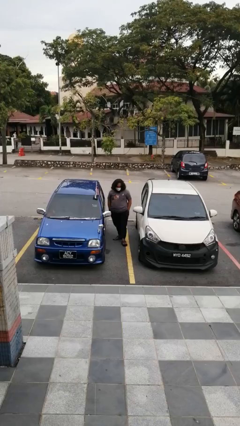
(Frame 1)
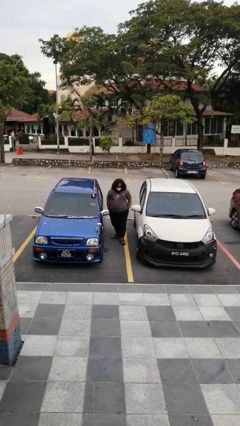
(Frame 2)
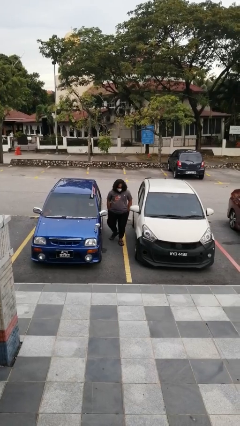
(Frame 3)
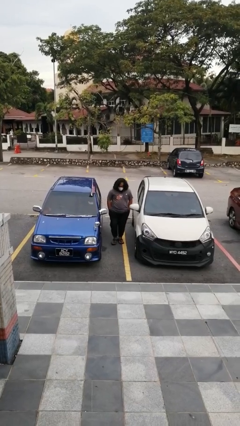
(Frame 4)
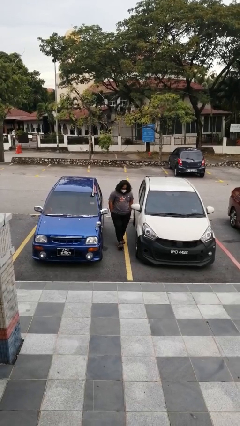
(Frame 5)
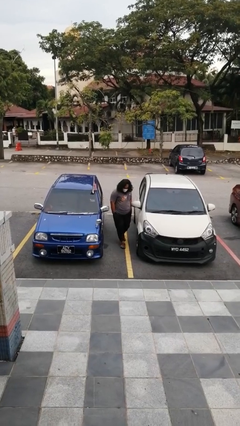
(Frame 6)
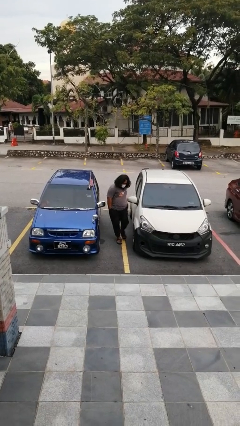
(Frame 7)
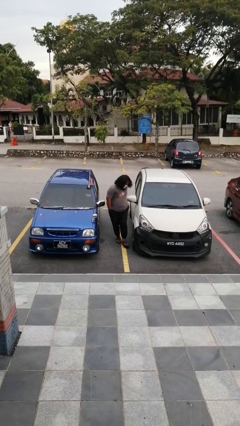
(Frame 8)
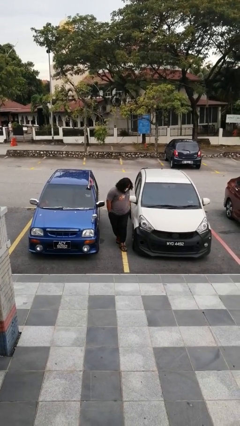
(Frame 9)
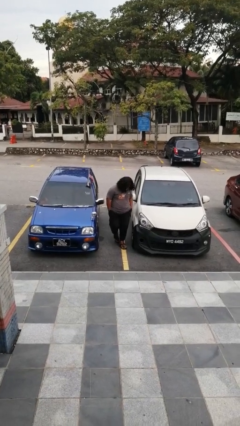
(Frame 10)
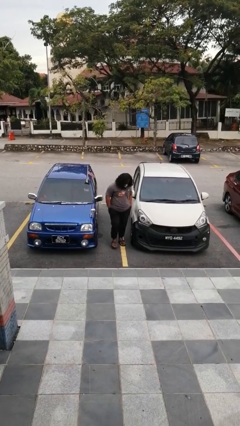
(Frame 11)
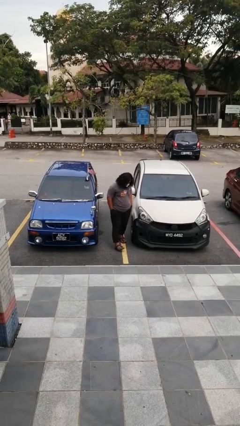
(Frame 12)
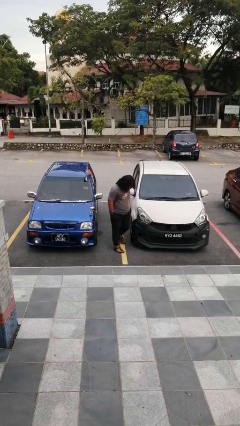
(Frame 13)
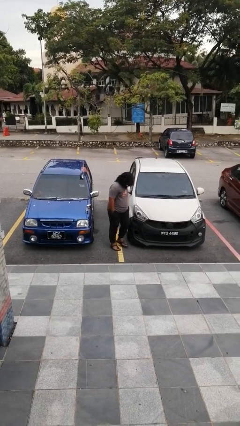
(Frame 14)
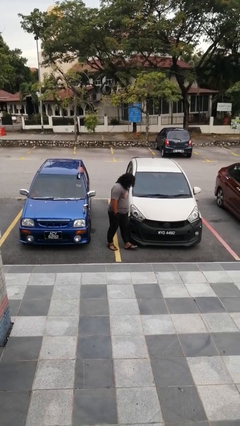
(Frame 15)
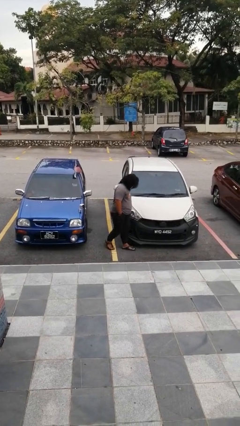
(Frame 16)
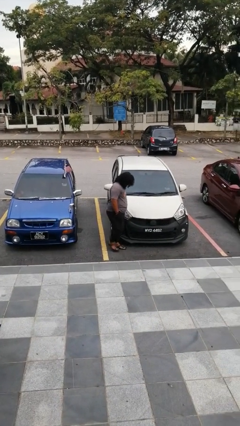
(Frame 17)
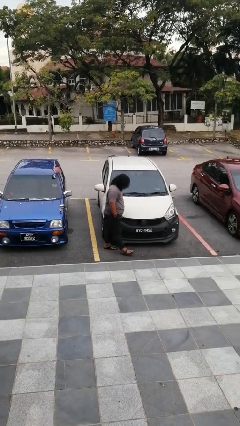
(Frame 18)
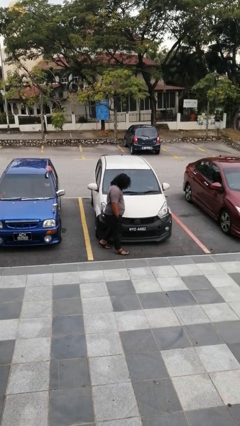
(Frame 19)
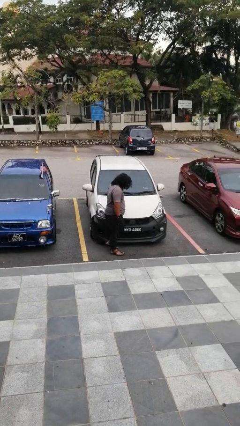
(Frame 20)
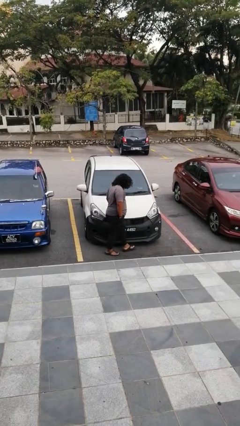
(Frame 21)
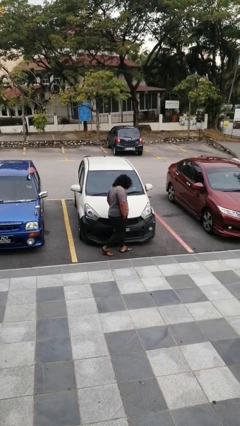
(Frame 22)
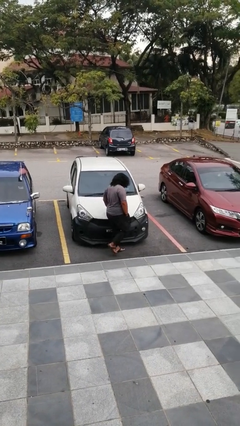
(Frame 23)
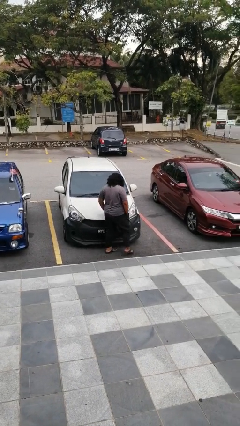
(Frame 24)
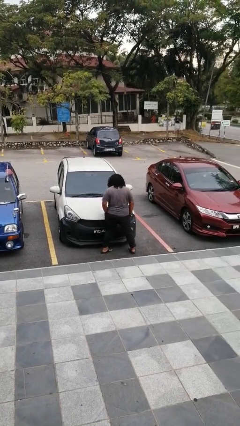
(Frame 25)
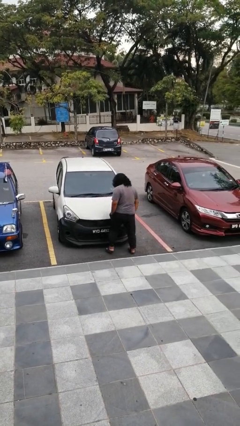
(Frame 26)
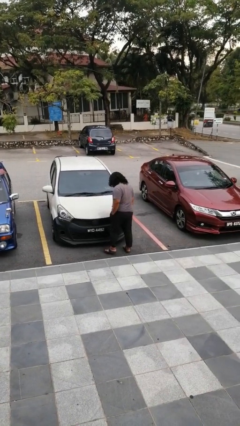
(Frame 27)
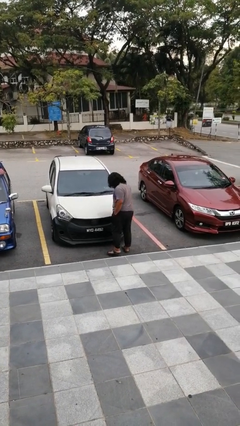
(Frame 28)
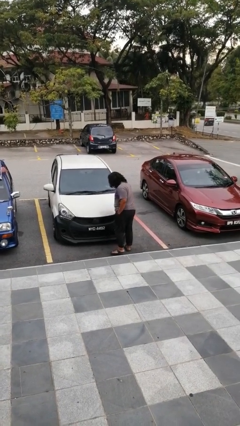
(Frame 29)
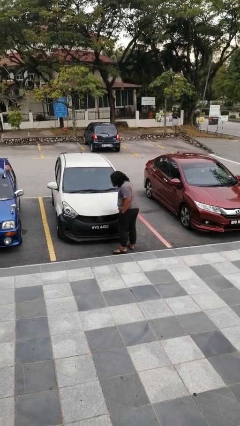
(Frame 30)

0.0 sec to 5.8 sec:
person walks around car

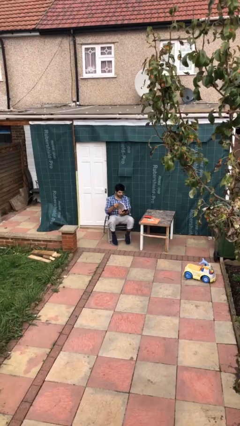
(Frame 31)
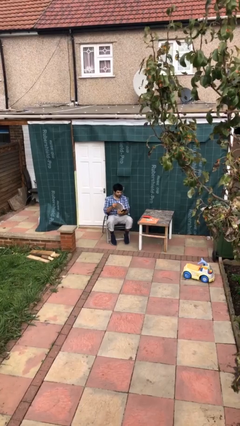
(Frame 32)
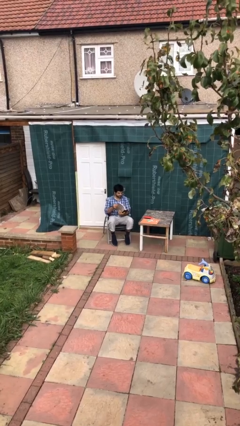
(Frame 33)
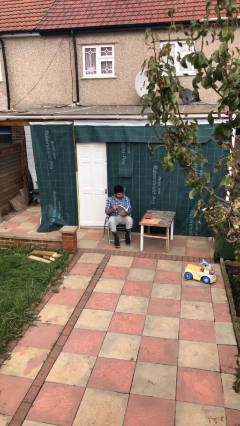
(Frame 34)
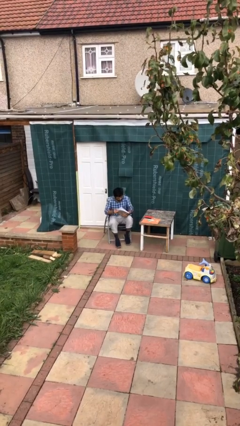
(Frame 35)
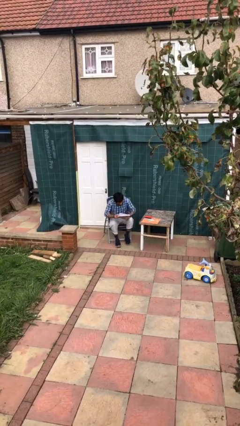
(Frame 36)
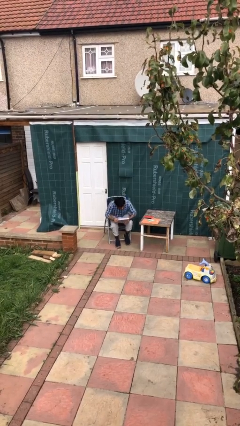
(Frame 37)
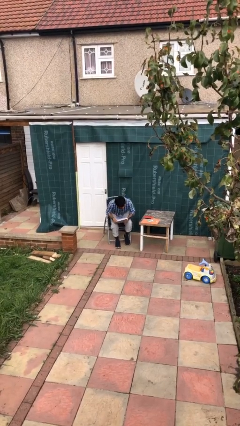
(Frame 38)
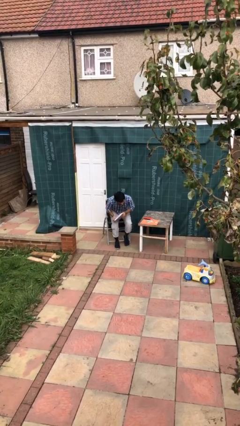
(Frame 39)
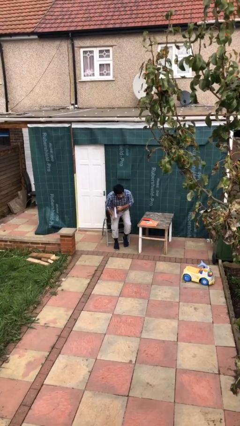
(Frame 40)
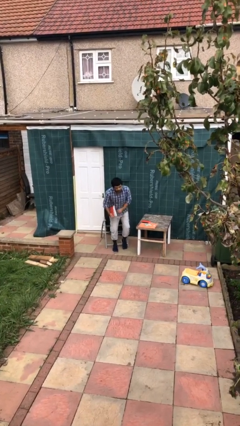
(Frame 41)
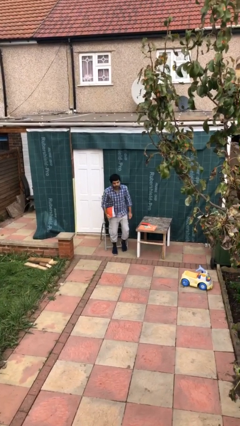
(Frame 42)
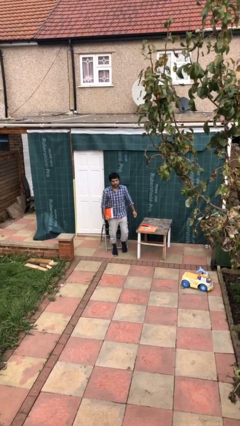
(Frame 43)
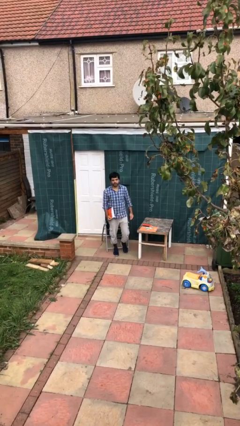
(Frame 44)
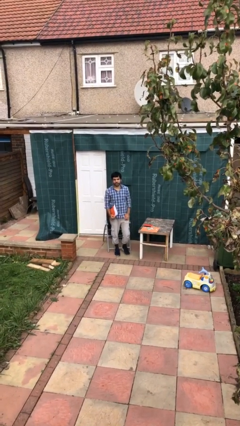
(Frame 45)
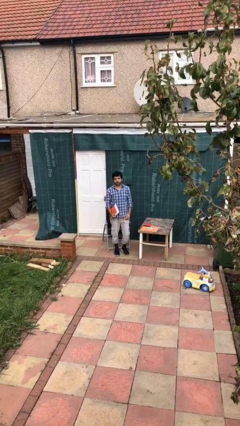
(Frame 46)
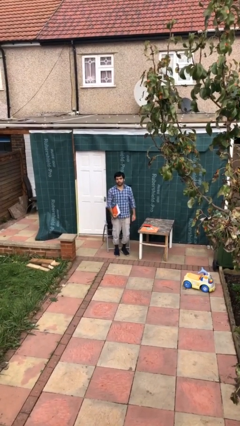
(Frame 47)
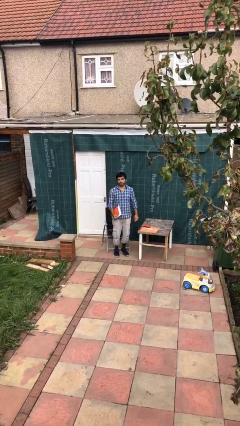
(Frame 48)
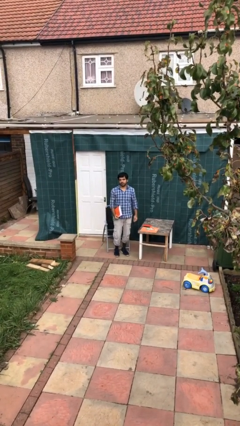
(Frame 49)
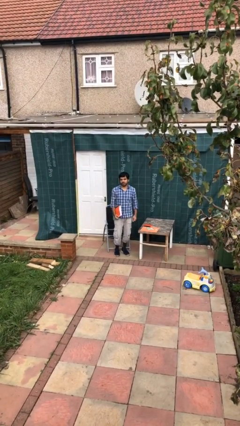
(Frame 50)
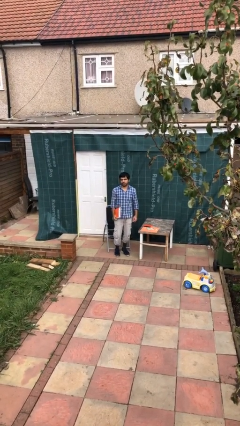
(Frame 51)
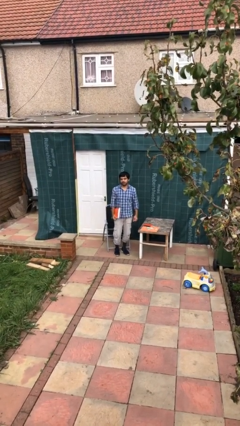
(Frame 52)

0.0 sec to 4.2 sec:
person stands up

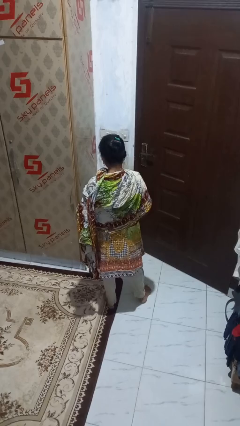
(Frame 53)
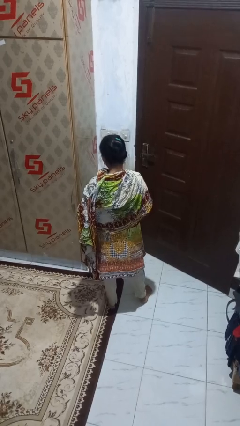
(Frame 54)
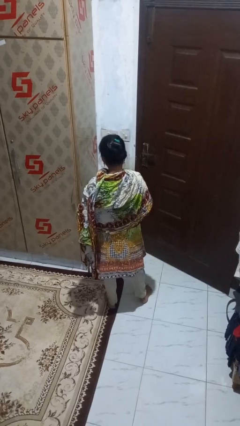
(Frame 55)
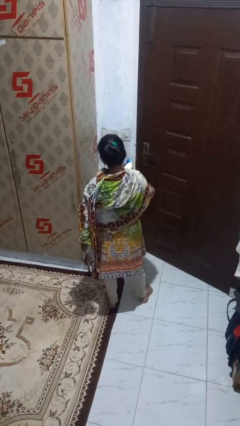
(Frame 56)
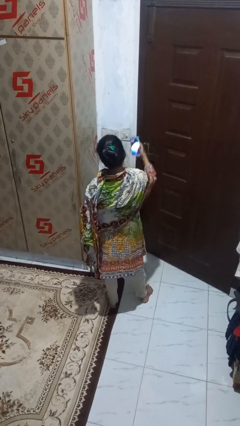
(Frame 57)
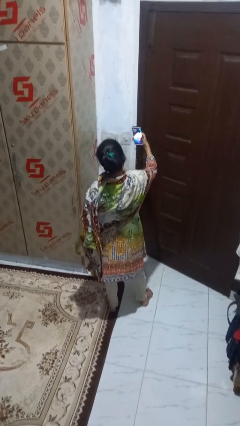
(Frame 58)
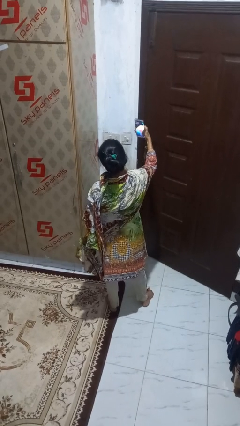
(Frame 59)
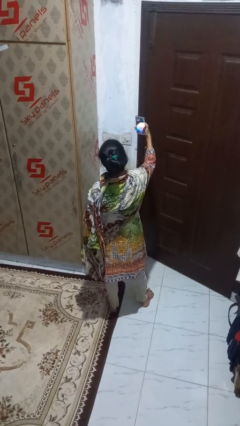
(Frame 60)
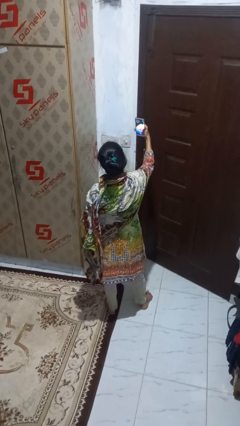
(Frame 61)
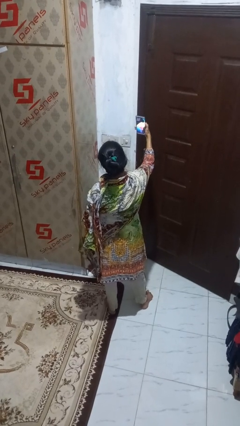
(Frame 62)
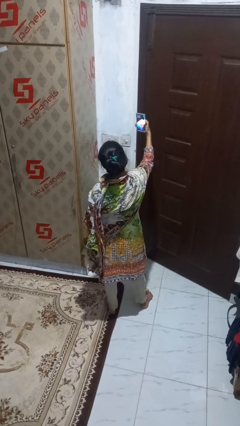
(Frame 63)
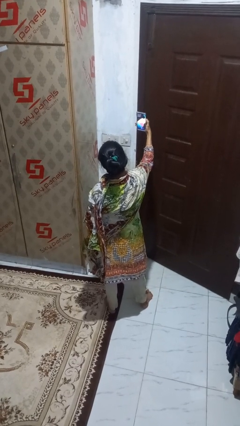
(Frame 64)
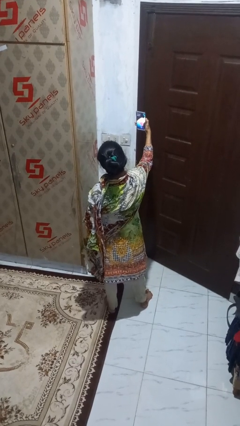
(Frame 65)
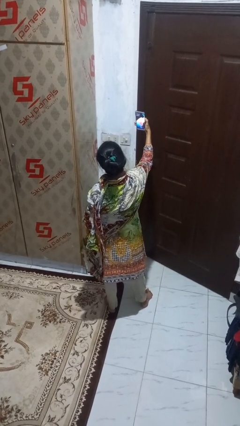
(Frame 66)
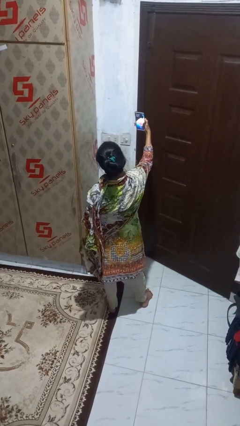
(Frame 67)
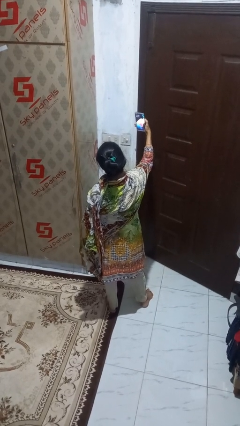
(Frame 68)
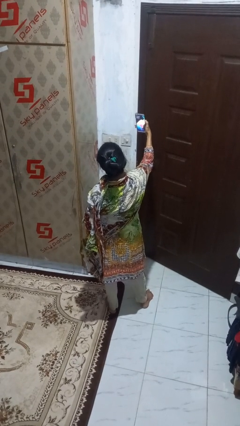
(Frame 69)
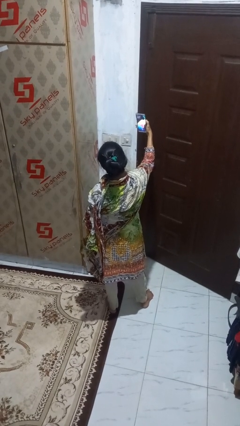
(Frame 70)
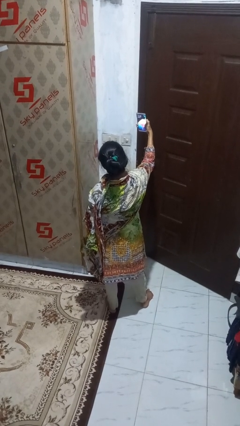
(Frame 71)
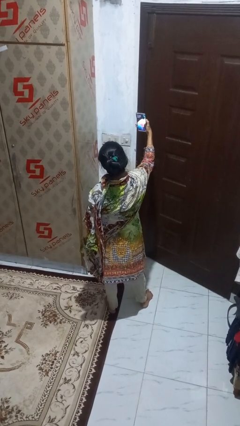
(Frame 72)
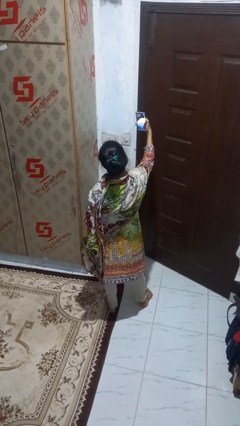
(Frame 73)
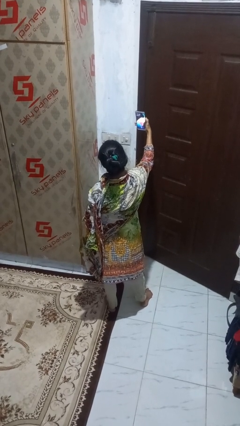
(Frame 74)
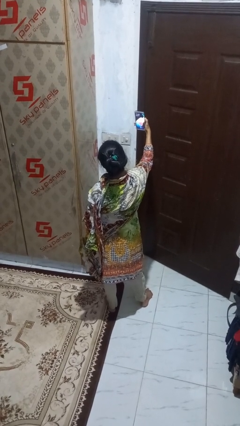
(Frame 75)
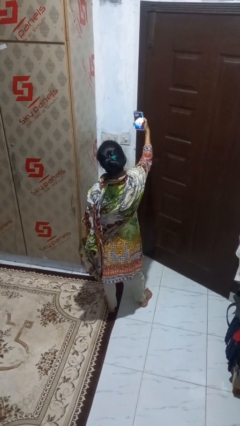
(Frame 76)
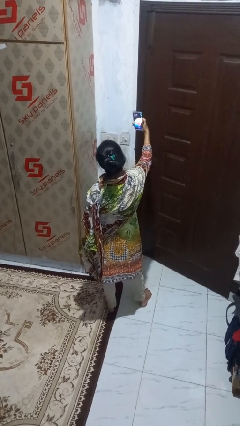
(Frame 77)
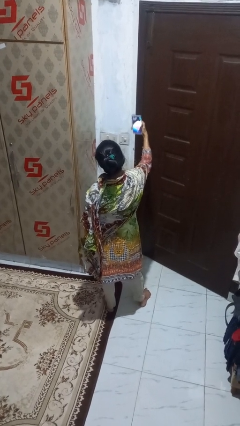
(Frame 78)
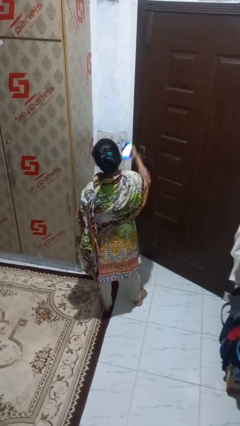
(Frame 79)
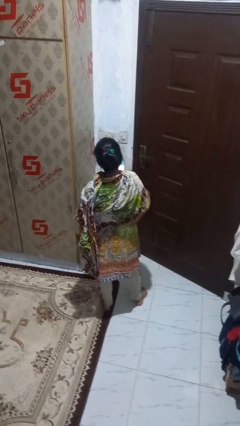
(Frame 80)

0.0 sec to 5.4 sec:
person takes selfie

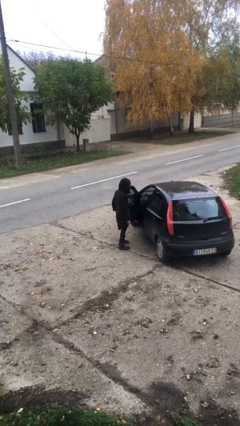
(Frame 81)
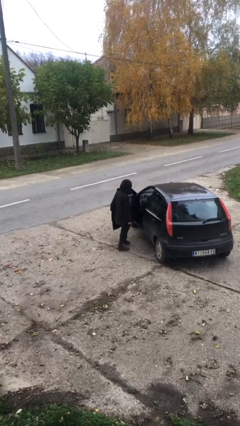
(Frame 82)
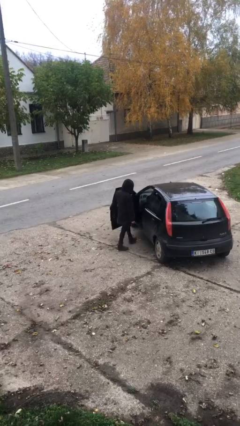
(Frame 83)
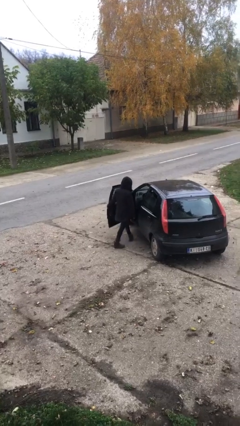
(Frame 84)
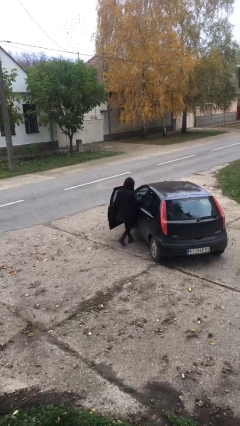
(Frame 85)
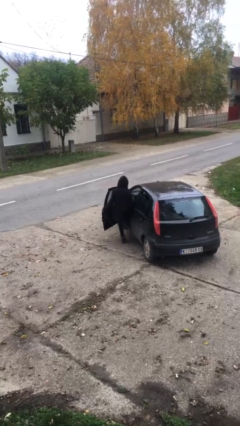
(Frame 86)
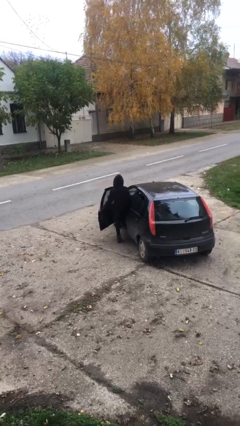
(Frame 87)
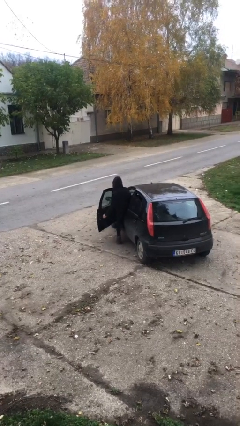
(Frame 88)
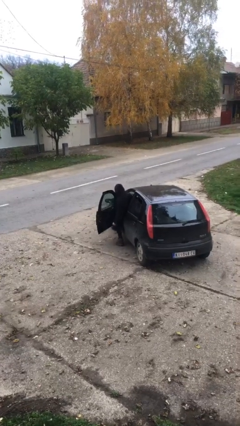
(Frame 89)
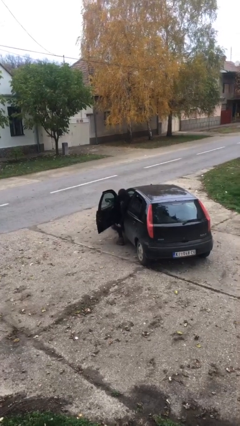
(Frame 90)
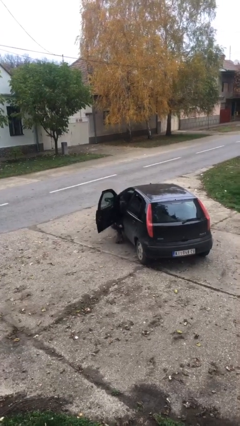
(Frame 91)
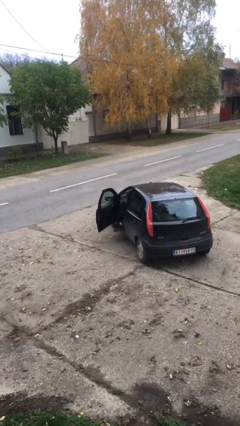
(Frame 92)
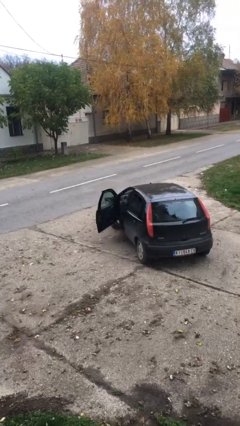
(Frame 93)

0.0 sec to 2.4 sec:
person enters car
